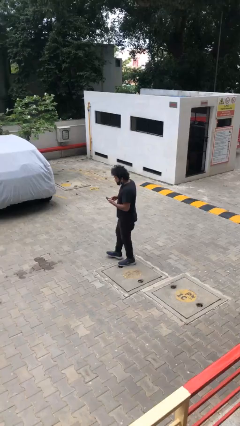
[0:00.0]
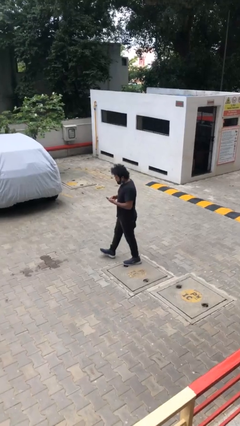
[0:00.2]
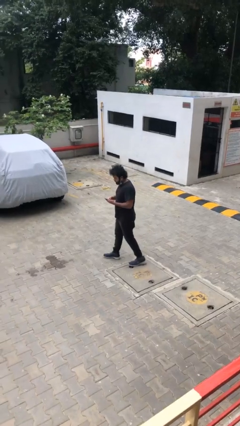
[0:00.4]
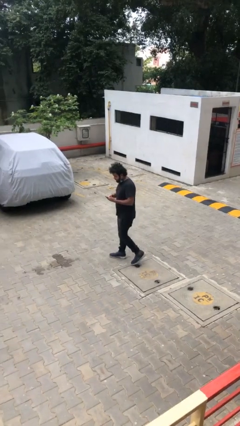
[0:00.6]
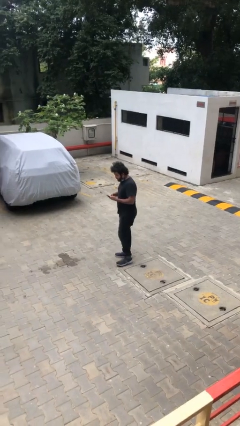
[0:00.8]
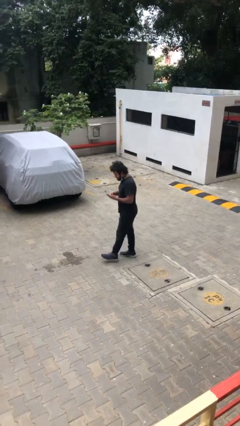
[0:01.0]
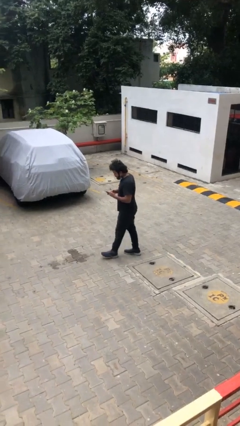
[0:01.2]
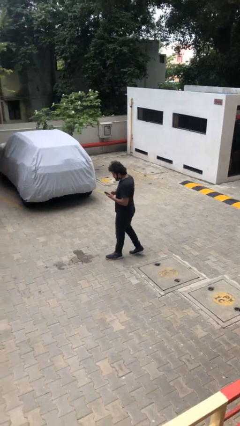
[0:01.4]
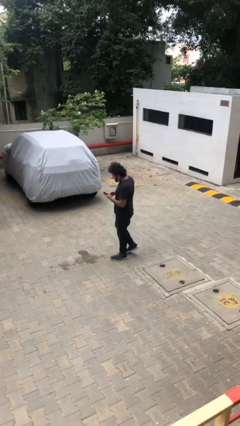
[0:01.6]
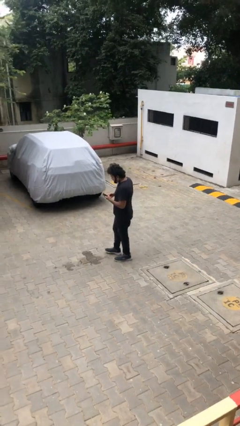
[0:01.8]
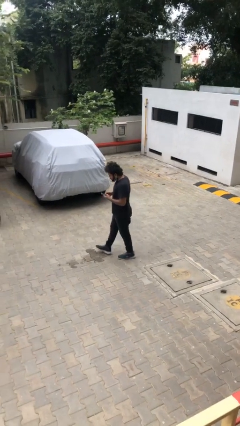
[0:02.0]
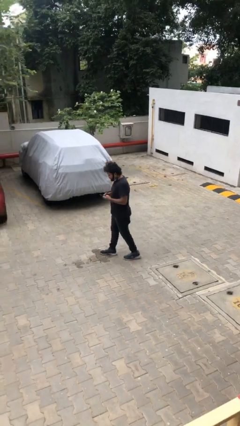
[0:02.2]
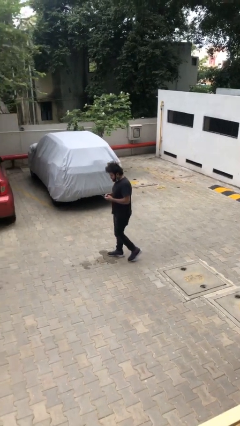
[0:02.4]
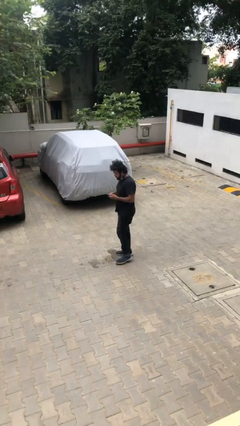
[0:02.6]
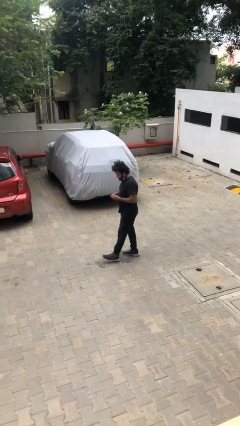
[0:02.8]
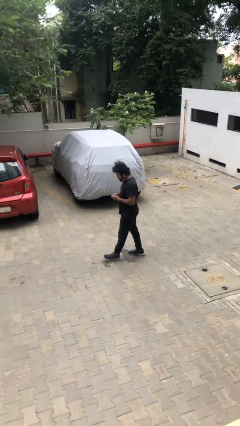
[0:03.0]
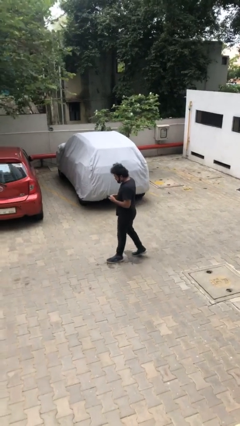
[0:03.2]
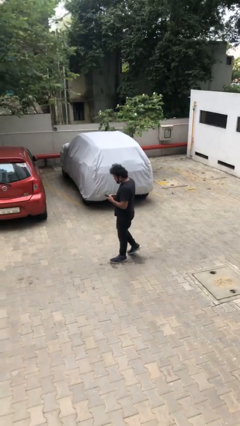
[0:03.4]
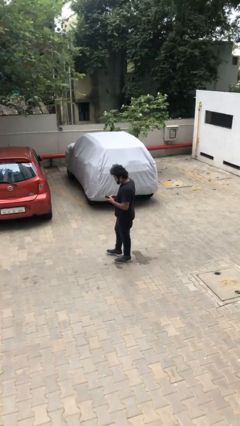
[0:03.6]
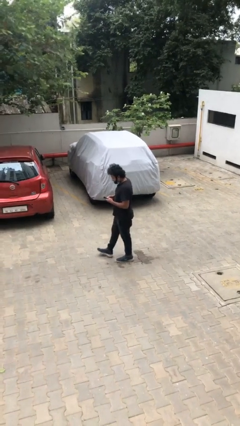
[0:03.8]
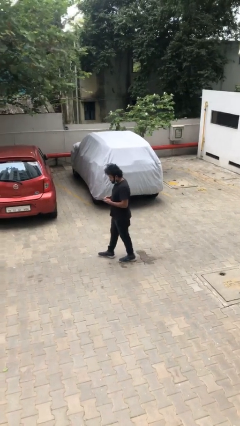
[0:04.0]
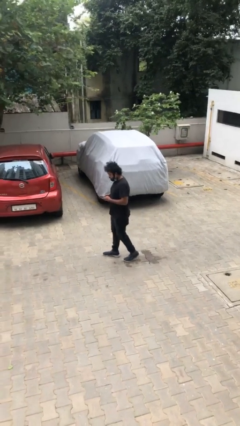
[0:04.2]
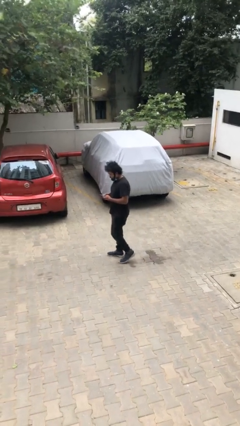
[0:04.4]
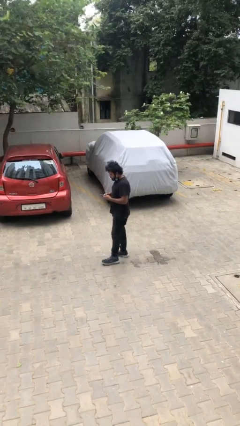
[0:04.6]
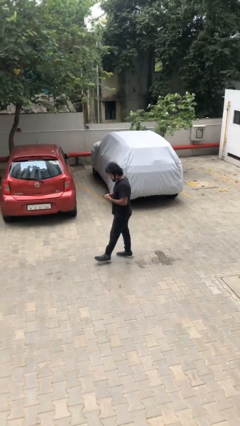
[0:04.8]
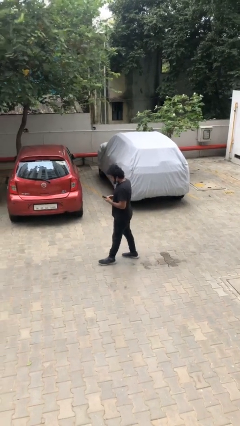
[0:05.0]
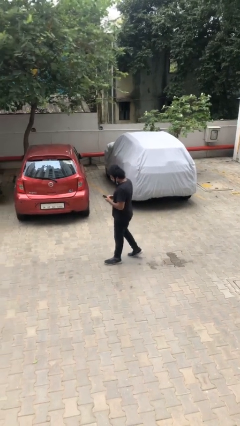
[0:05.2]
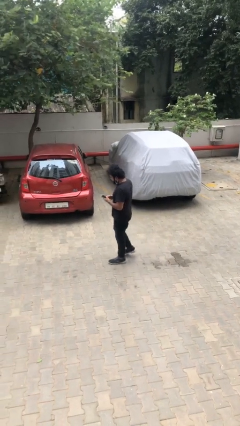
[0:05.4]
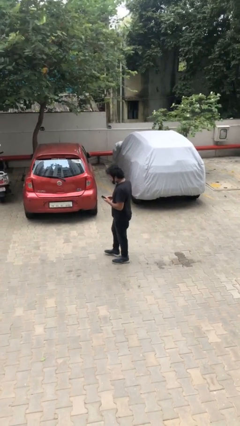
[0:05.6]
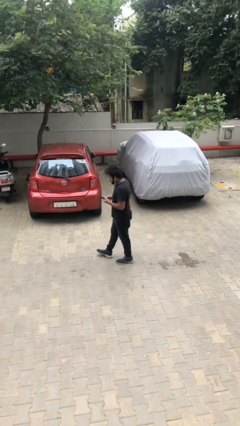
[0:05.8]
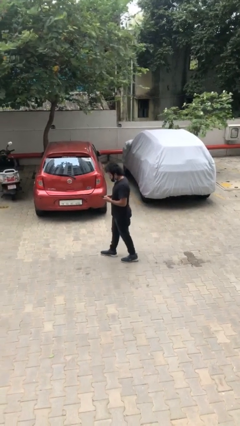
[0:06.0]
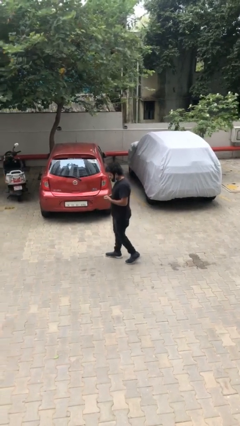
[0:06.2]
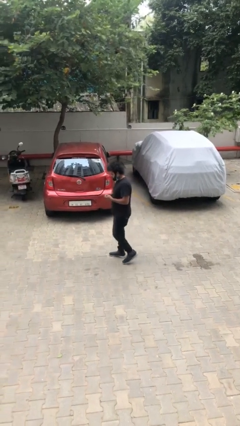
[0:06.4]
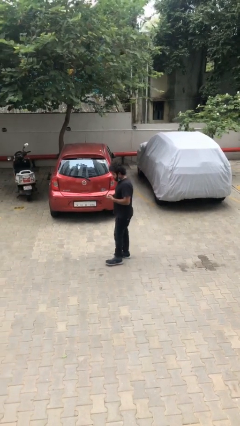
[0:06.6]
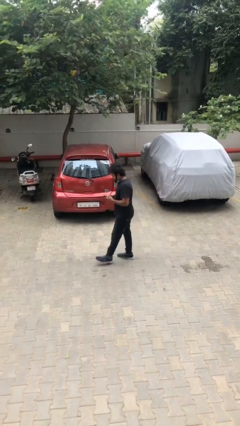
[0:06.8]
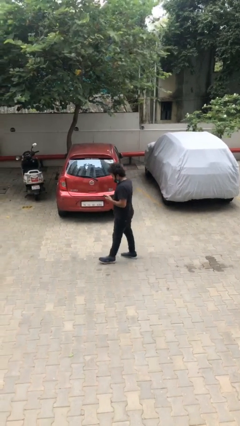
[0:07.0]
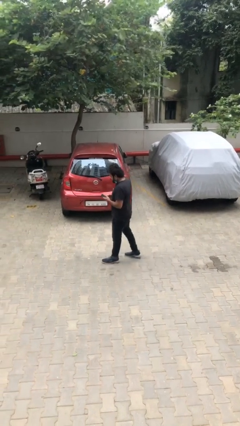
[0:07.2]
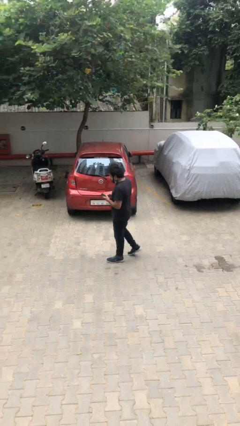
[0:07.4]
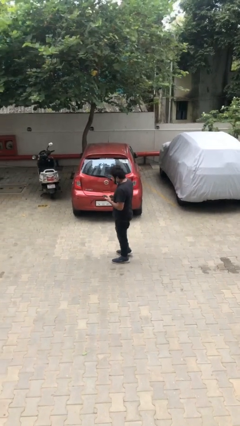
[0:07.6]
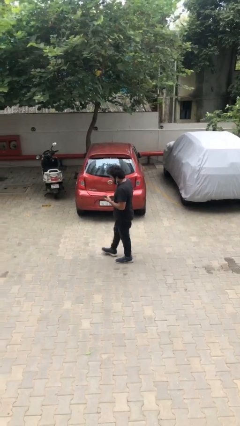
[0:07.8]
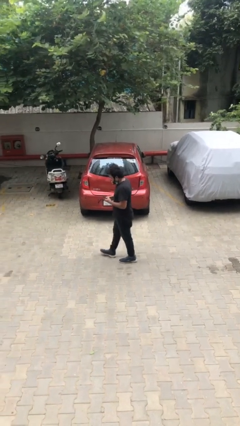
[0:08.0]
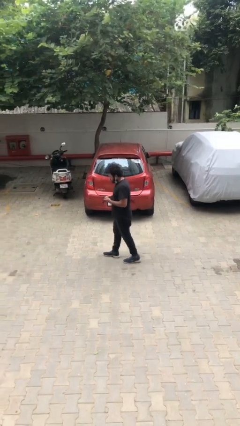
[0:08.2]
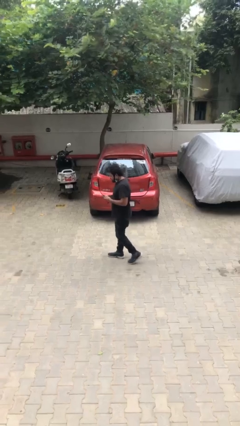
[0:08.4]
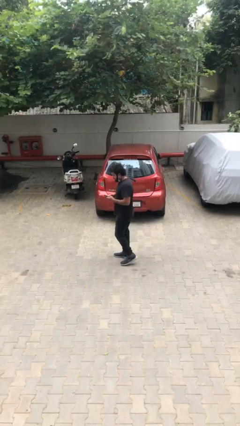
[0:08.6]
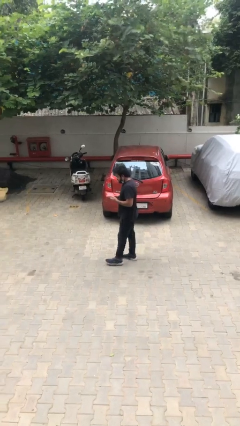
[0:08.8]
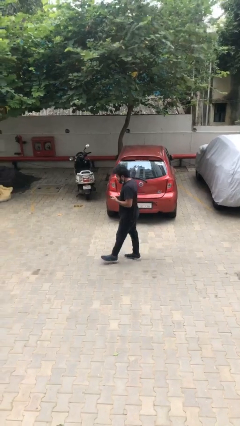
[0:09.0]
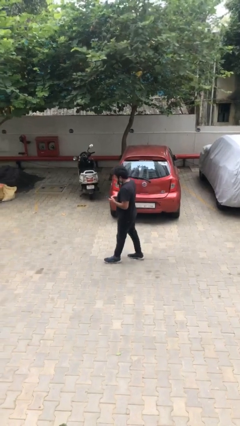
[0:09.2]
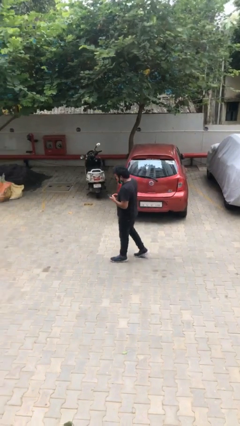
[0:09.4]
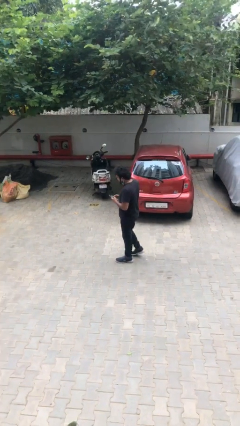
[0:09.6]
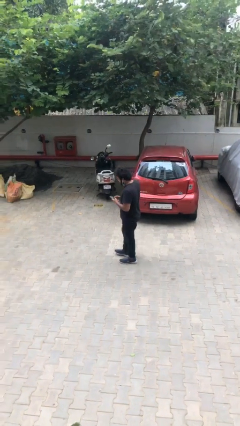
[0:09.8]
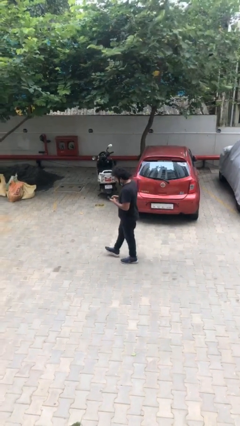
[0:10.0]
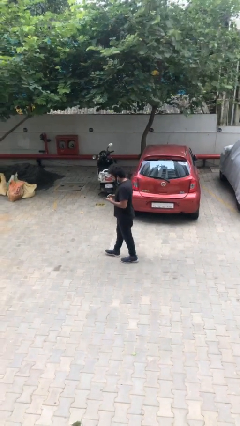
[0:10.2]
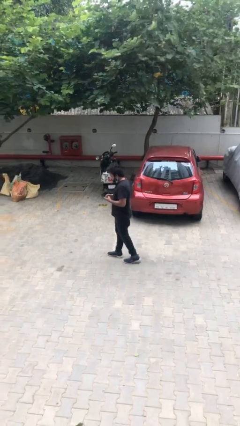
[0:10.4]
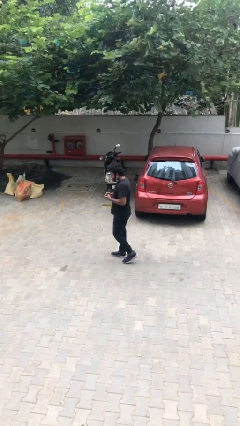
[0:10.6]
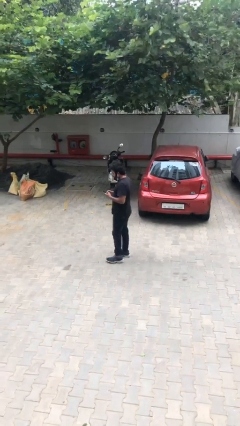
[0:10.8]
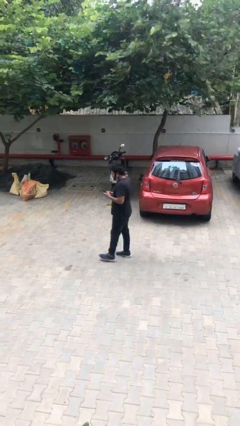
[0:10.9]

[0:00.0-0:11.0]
person texts on phone

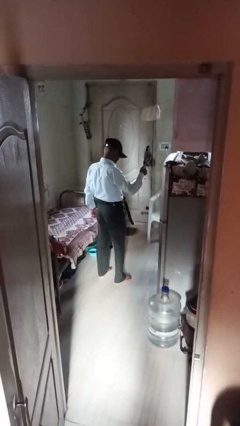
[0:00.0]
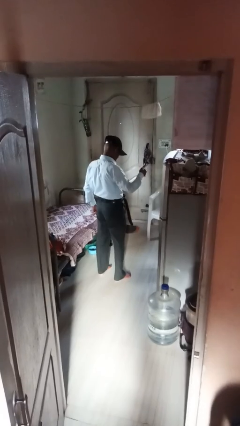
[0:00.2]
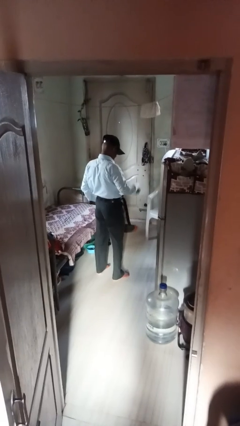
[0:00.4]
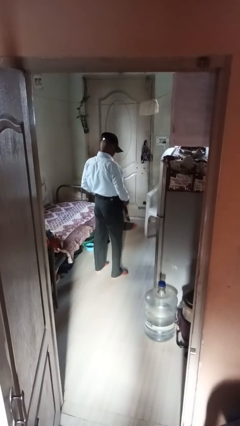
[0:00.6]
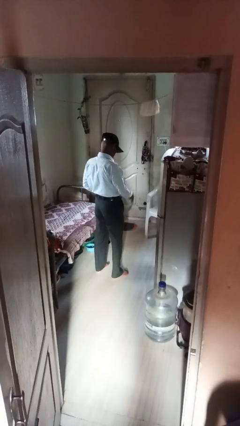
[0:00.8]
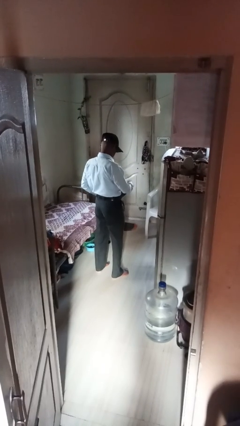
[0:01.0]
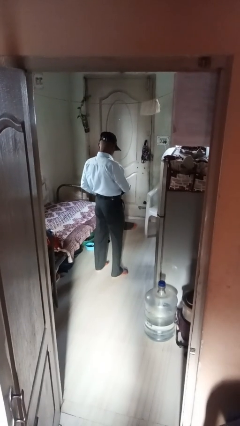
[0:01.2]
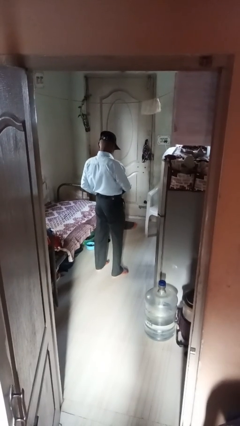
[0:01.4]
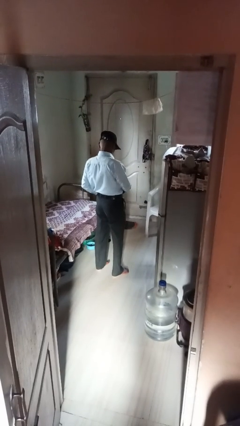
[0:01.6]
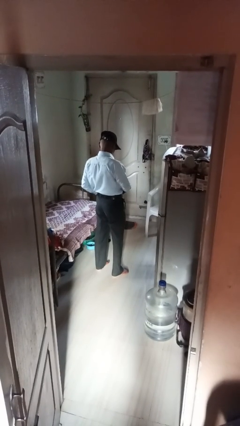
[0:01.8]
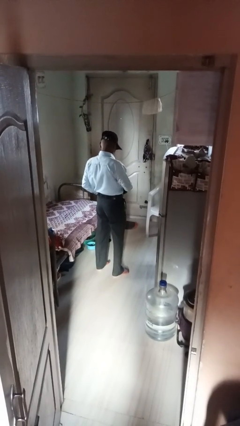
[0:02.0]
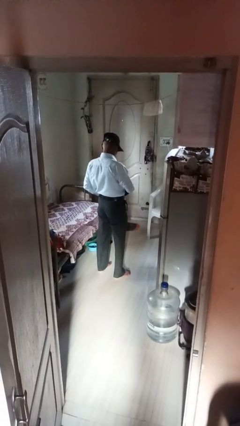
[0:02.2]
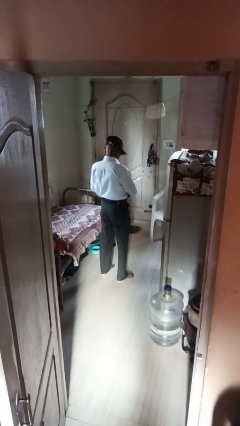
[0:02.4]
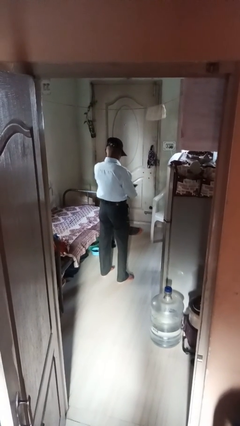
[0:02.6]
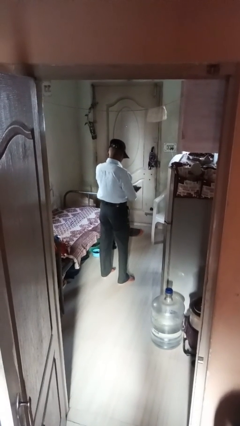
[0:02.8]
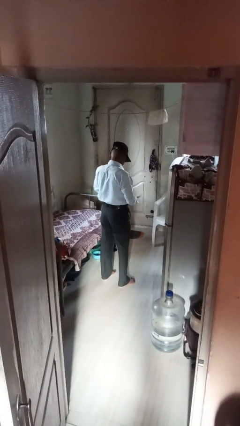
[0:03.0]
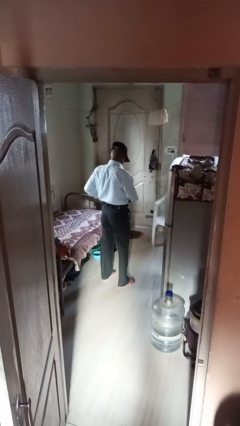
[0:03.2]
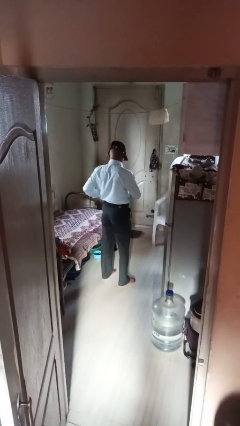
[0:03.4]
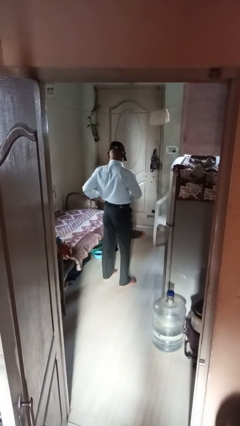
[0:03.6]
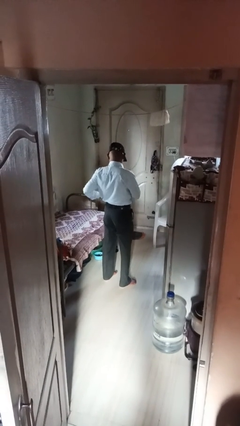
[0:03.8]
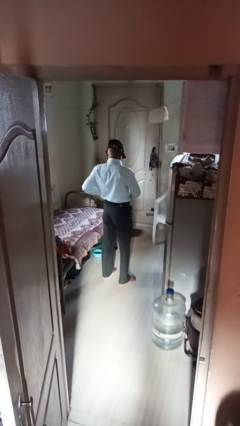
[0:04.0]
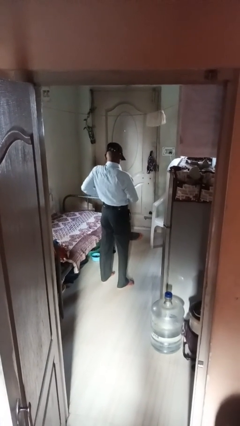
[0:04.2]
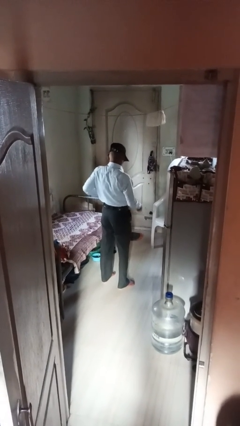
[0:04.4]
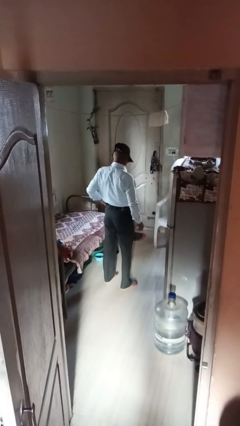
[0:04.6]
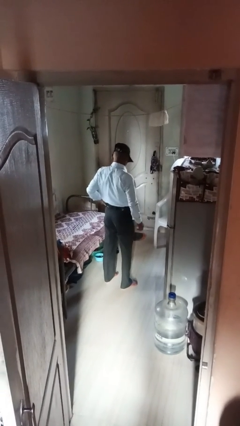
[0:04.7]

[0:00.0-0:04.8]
person puts on belt

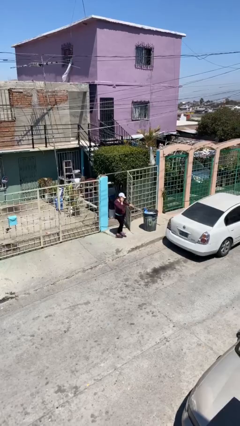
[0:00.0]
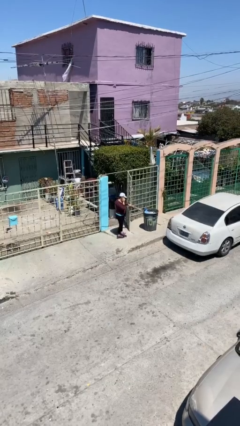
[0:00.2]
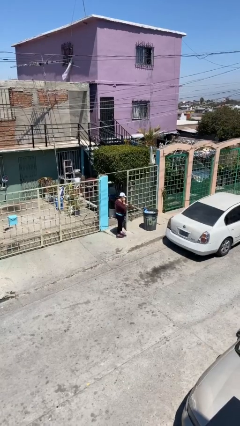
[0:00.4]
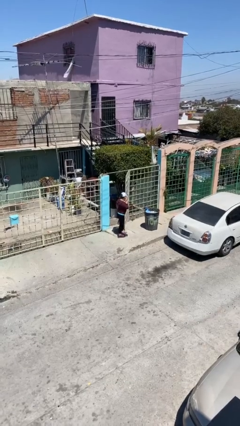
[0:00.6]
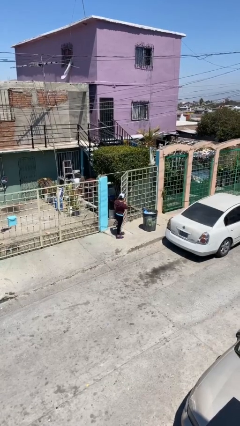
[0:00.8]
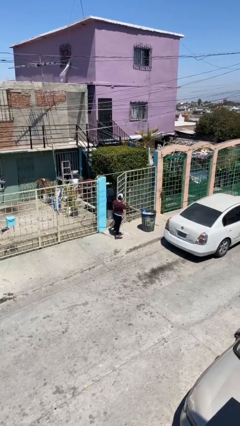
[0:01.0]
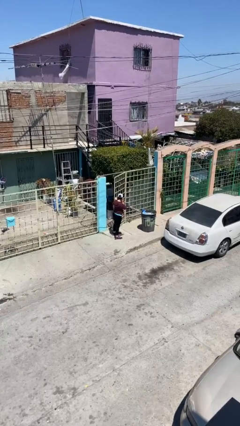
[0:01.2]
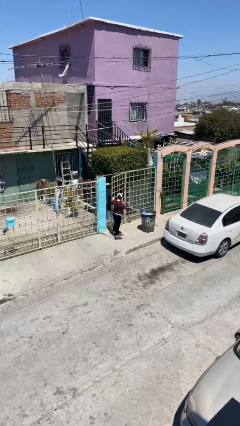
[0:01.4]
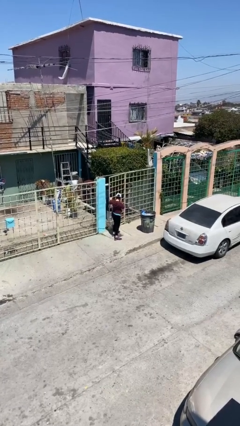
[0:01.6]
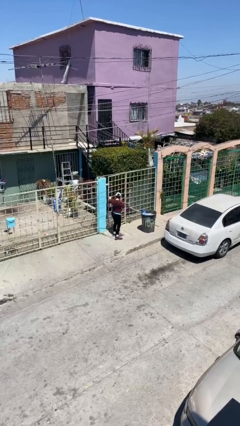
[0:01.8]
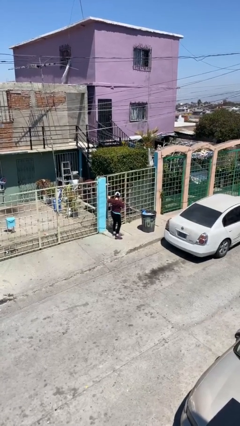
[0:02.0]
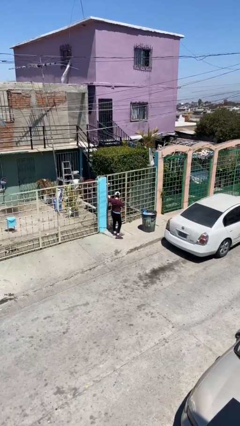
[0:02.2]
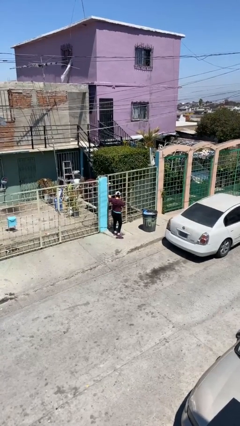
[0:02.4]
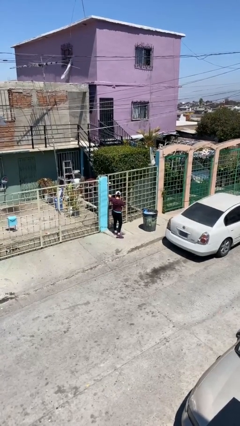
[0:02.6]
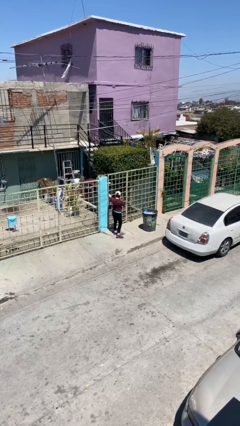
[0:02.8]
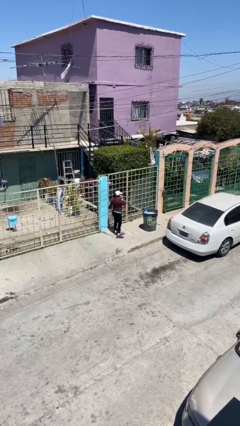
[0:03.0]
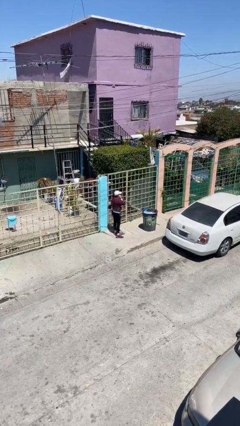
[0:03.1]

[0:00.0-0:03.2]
person closes facility door
